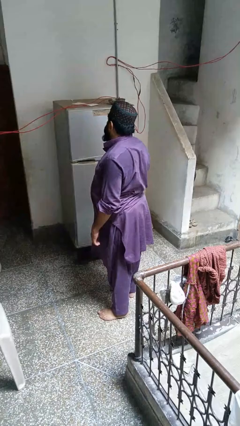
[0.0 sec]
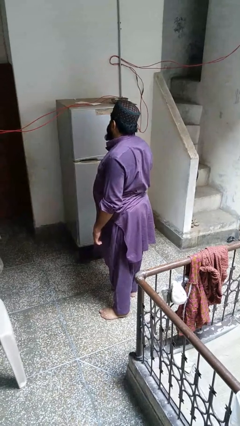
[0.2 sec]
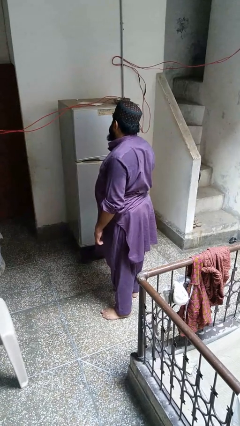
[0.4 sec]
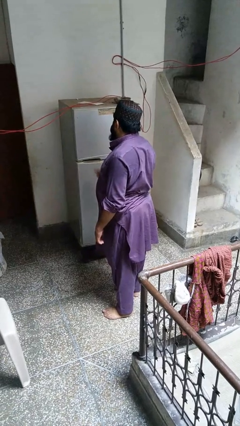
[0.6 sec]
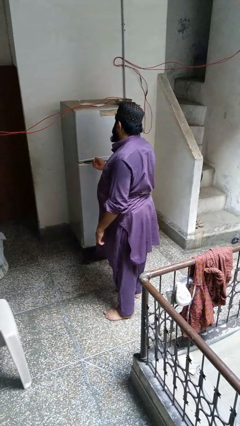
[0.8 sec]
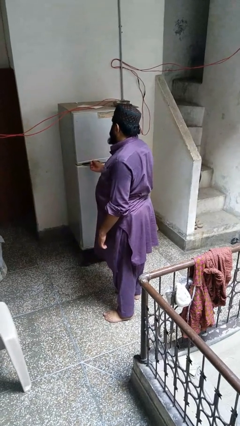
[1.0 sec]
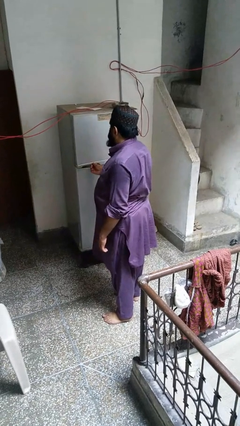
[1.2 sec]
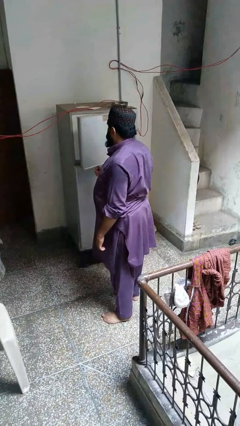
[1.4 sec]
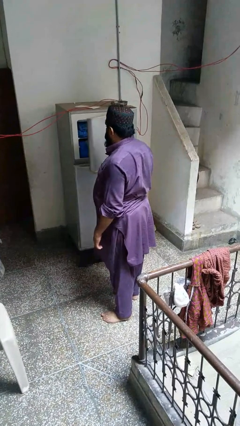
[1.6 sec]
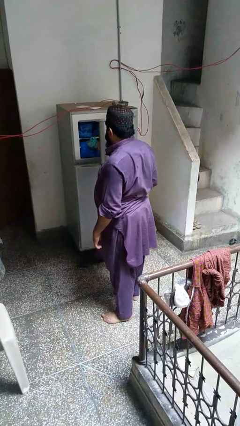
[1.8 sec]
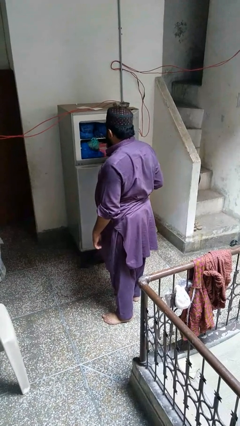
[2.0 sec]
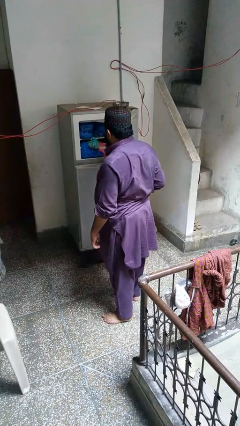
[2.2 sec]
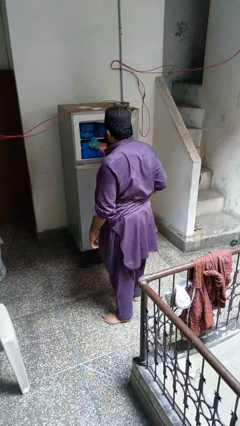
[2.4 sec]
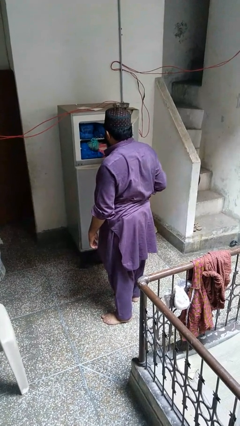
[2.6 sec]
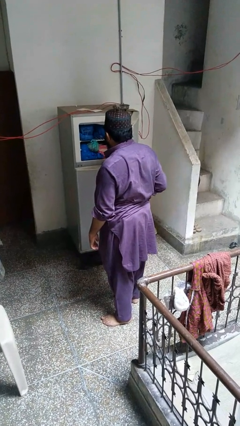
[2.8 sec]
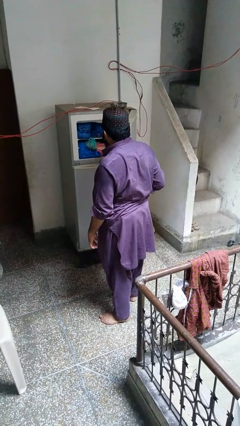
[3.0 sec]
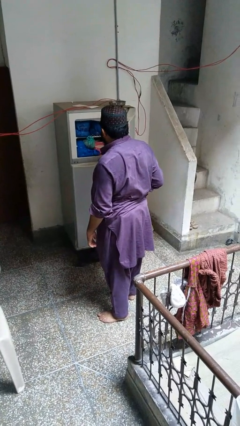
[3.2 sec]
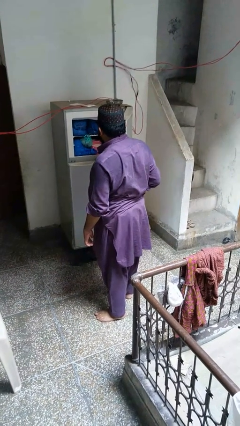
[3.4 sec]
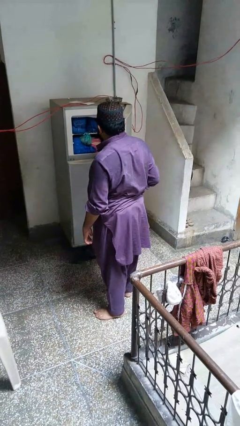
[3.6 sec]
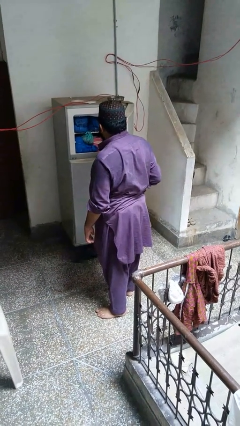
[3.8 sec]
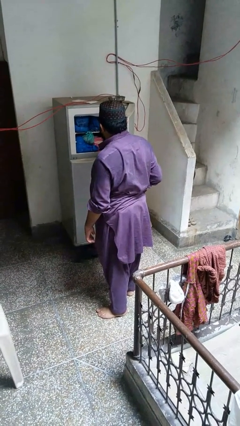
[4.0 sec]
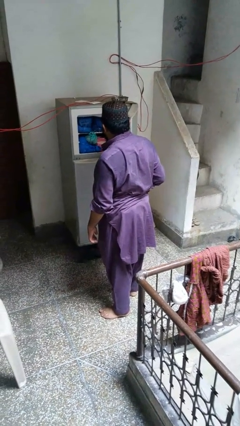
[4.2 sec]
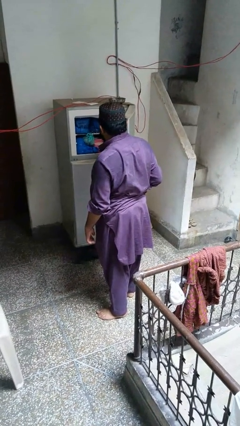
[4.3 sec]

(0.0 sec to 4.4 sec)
person opens refrigerator

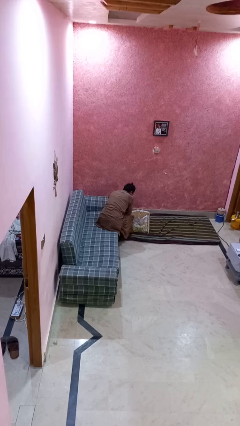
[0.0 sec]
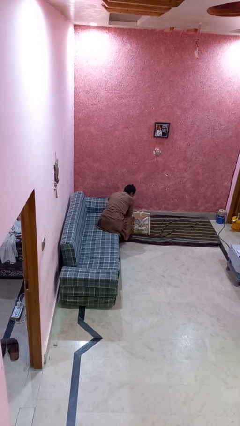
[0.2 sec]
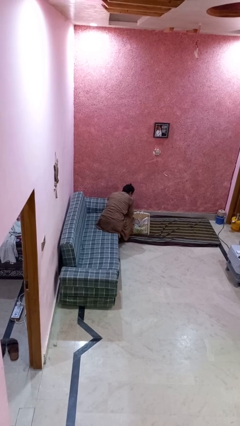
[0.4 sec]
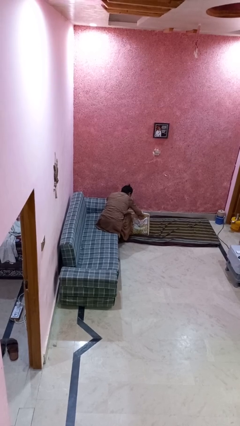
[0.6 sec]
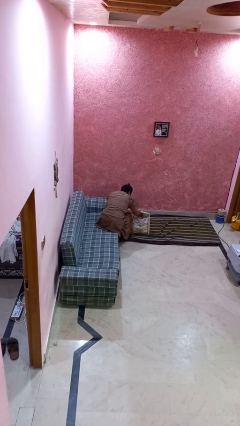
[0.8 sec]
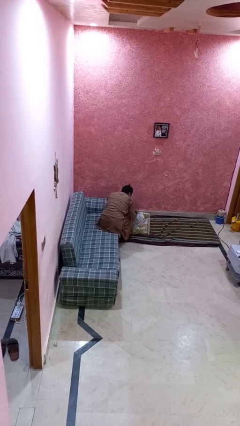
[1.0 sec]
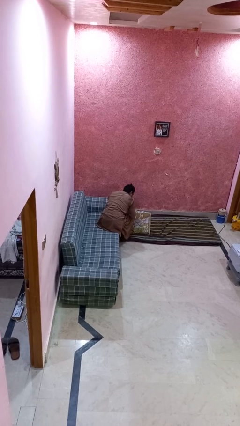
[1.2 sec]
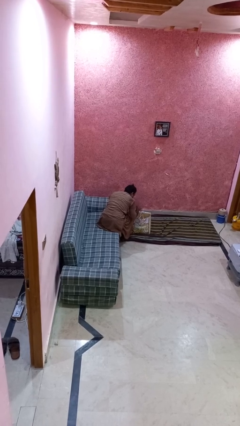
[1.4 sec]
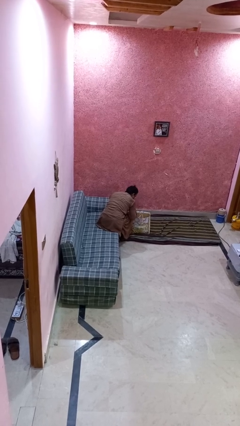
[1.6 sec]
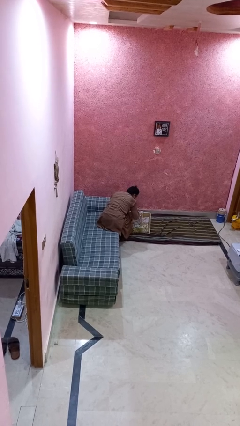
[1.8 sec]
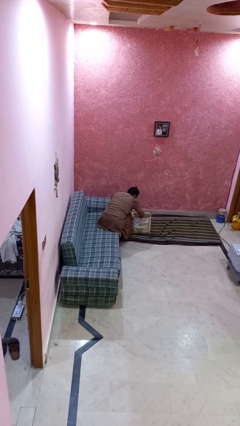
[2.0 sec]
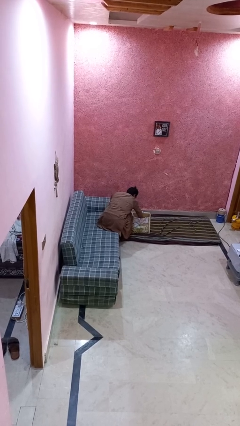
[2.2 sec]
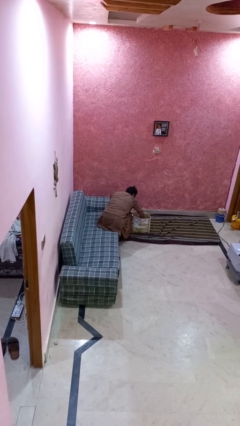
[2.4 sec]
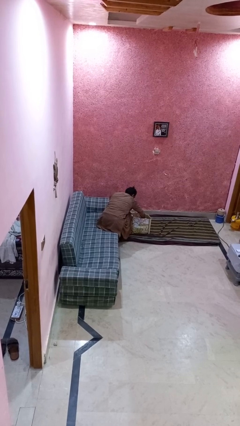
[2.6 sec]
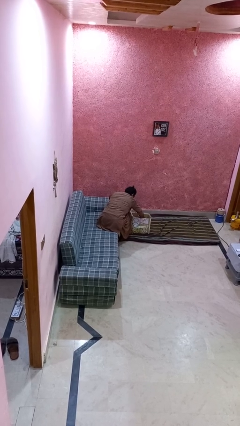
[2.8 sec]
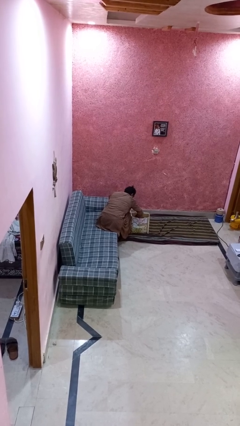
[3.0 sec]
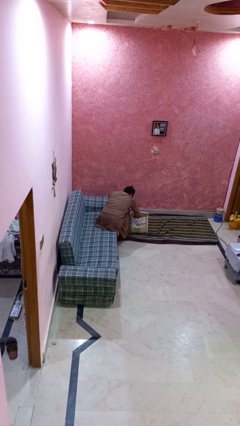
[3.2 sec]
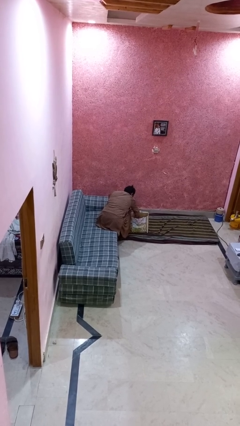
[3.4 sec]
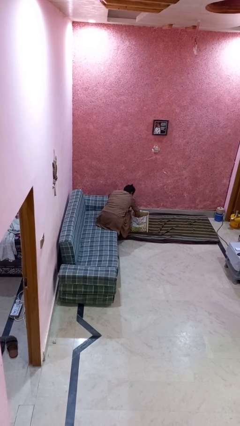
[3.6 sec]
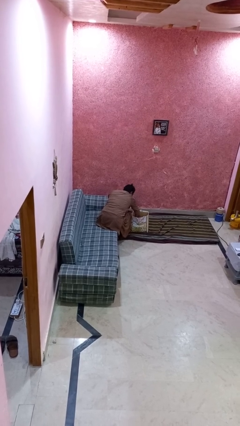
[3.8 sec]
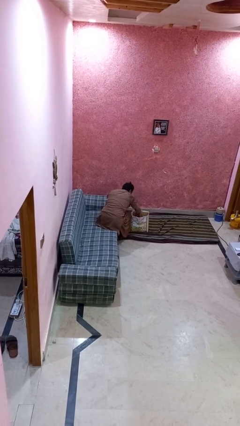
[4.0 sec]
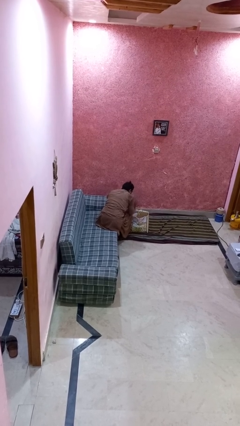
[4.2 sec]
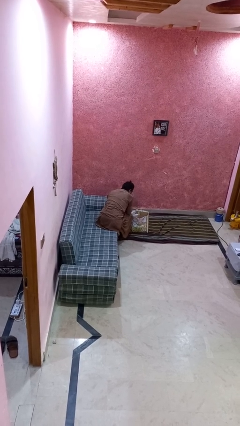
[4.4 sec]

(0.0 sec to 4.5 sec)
person searches in bag

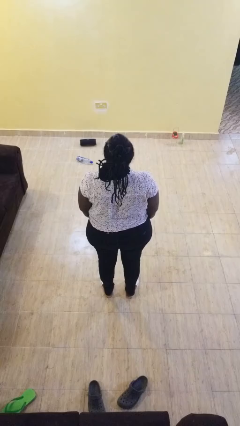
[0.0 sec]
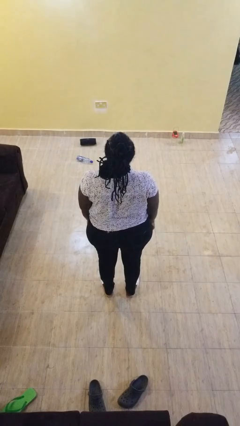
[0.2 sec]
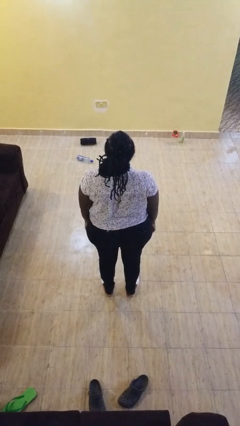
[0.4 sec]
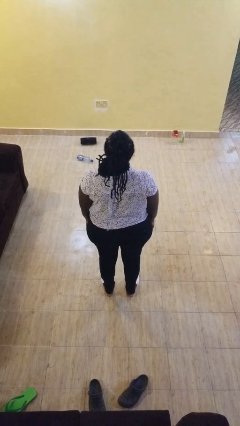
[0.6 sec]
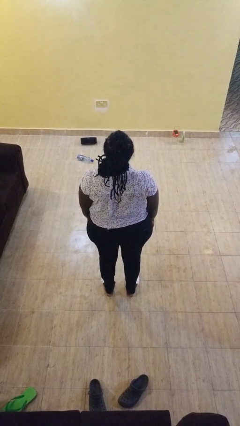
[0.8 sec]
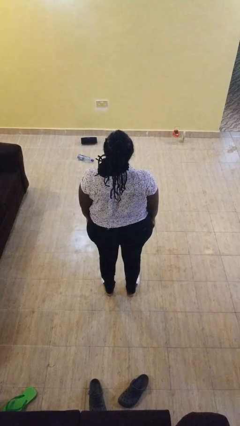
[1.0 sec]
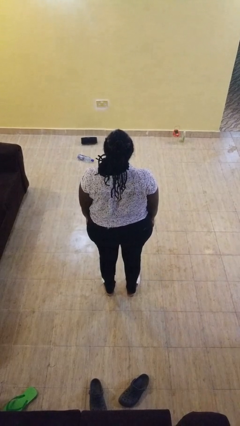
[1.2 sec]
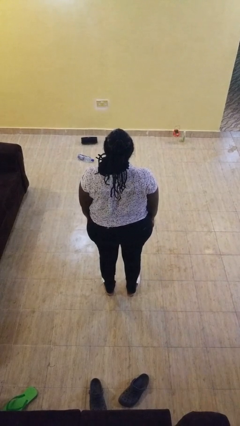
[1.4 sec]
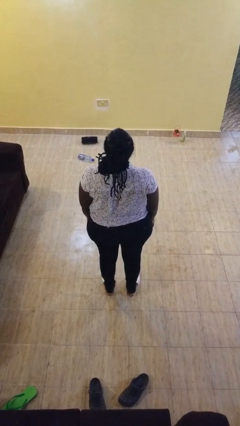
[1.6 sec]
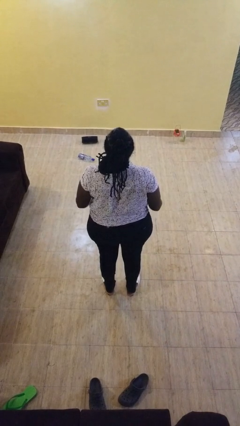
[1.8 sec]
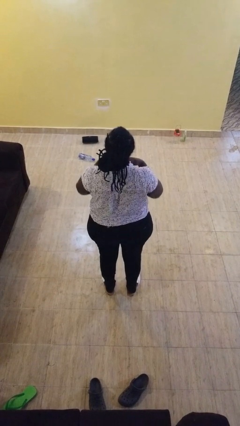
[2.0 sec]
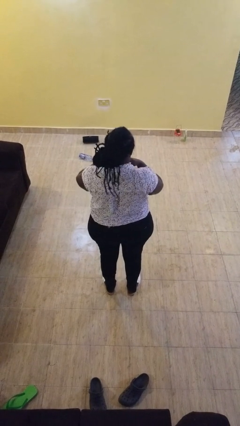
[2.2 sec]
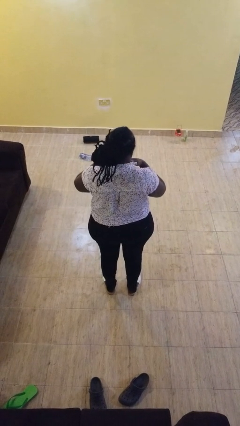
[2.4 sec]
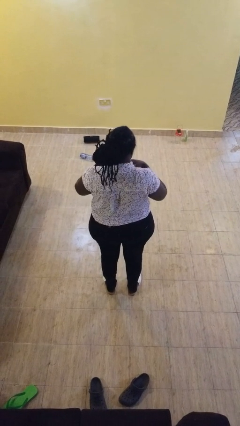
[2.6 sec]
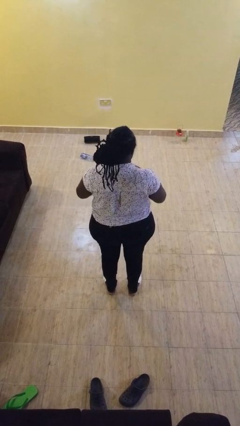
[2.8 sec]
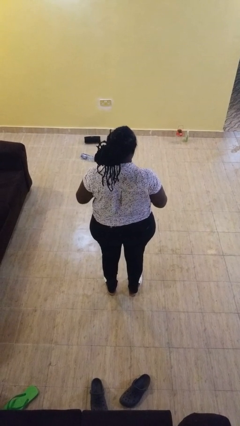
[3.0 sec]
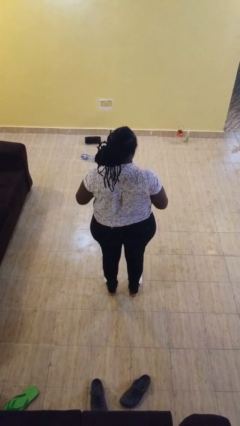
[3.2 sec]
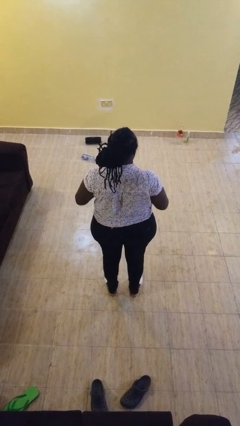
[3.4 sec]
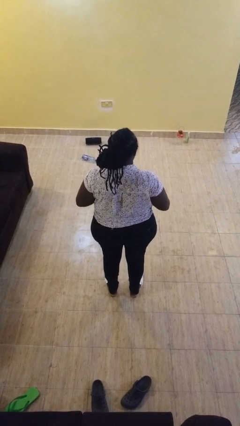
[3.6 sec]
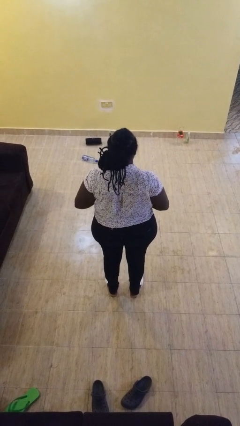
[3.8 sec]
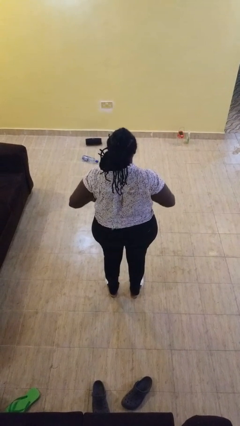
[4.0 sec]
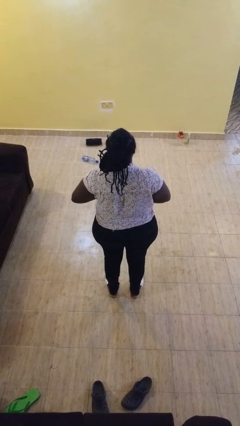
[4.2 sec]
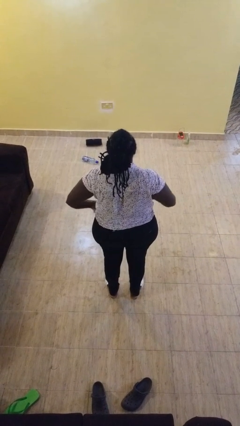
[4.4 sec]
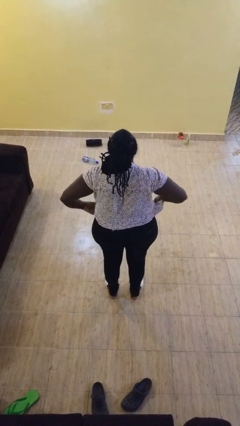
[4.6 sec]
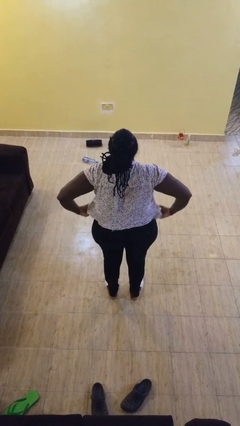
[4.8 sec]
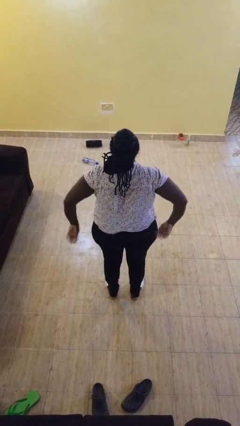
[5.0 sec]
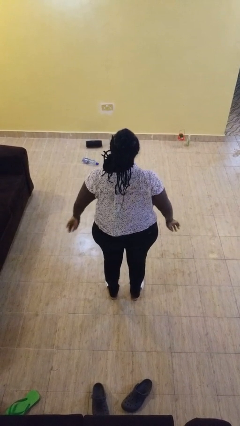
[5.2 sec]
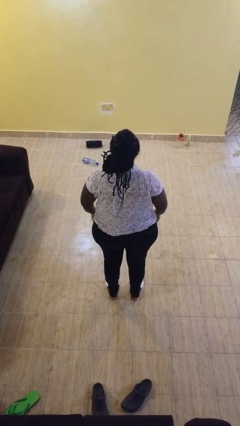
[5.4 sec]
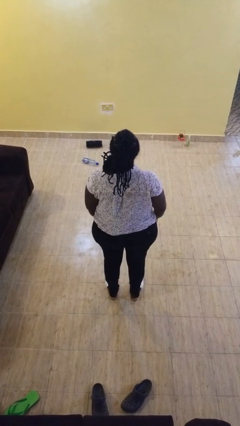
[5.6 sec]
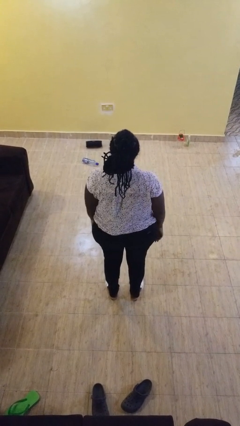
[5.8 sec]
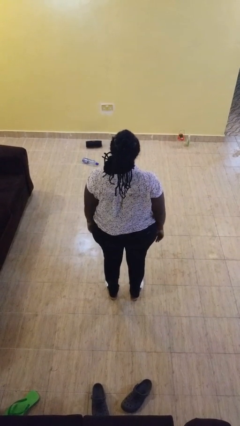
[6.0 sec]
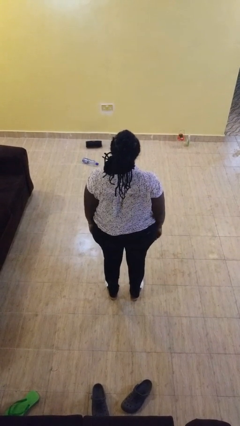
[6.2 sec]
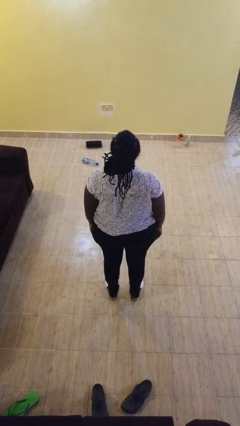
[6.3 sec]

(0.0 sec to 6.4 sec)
person unbuttons shirt

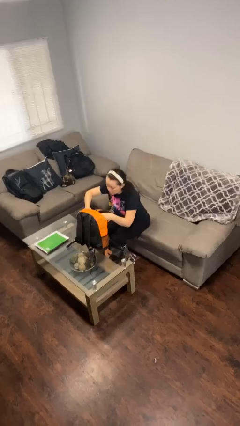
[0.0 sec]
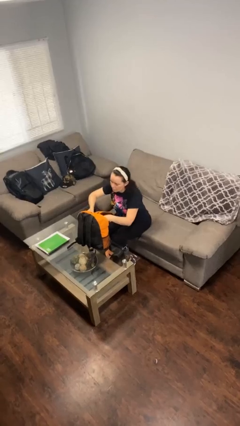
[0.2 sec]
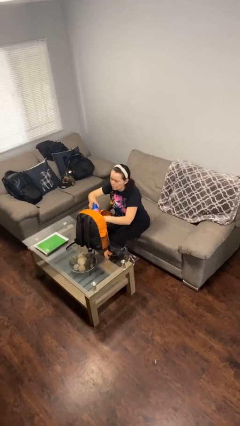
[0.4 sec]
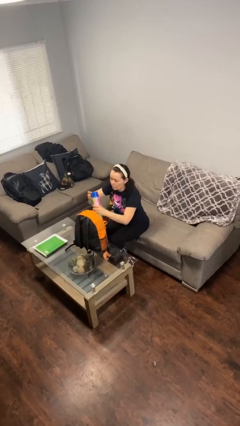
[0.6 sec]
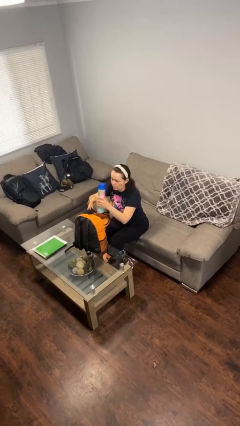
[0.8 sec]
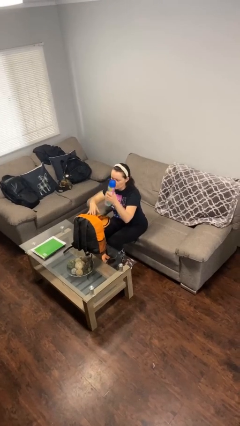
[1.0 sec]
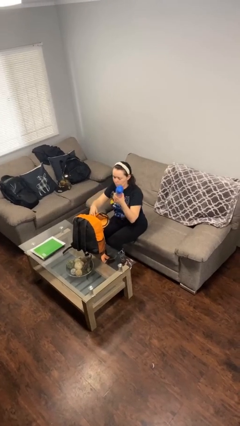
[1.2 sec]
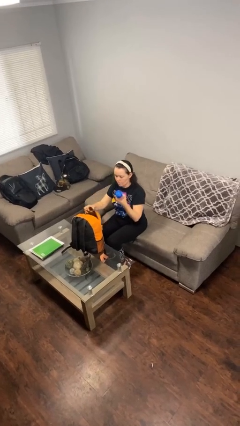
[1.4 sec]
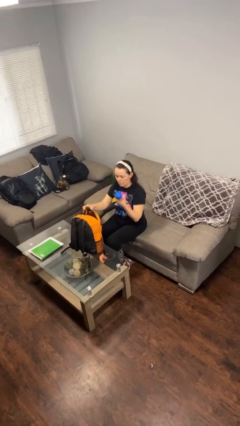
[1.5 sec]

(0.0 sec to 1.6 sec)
person takes object from backpack

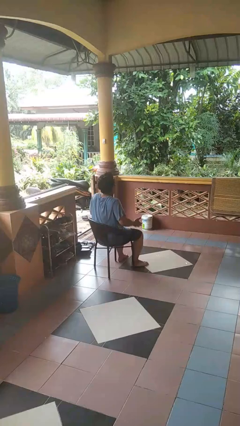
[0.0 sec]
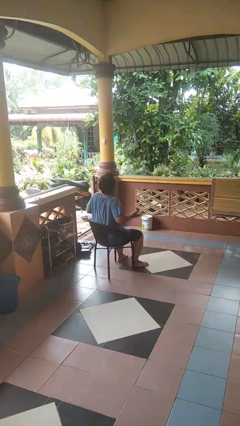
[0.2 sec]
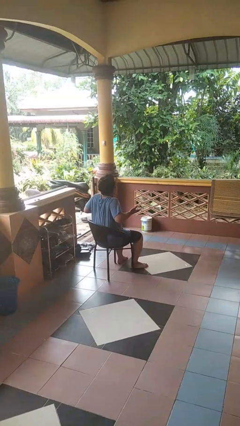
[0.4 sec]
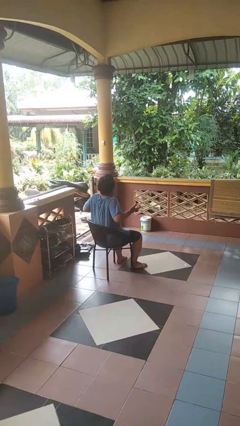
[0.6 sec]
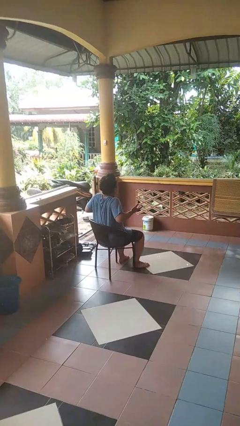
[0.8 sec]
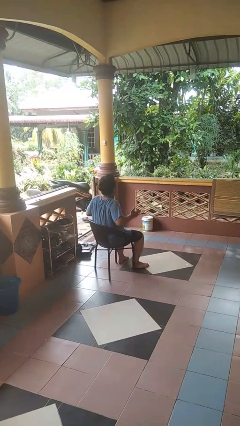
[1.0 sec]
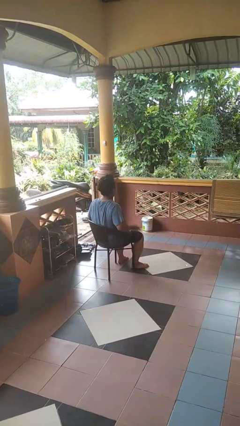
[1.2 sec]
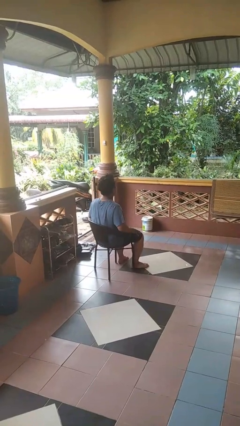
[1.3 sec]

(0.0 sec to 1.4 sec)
person shrugs
